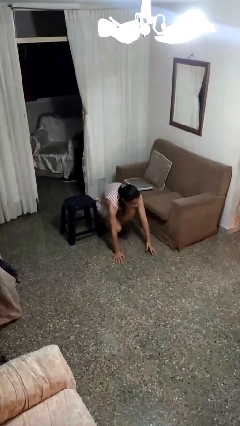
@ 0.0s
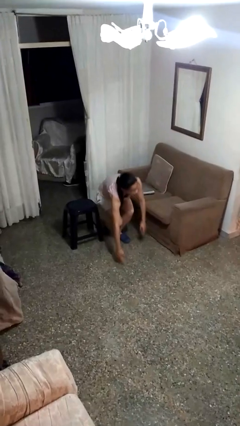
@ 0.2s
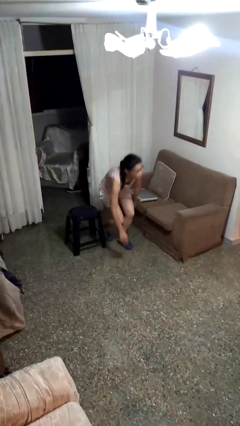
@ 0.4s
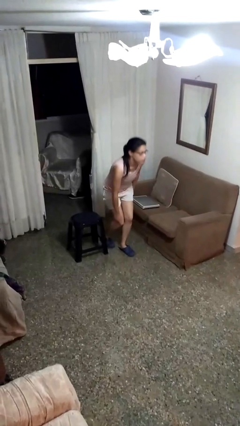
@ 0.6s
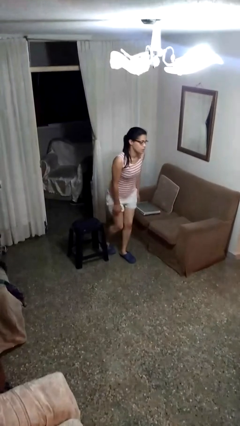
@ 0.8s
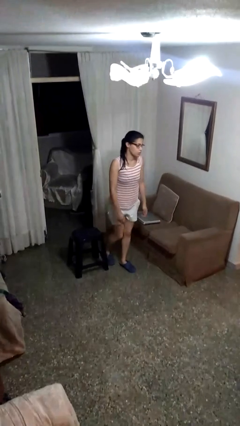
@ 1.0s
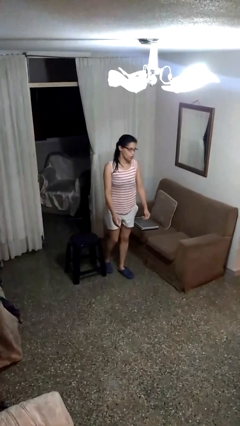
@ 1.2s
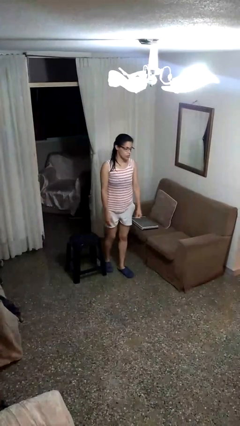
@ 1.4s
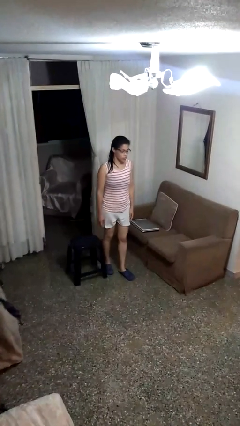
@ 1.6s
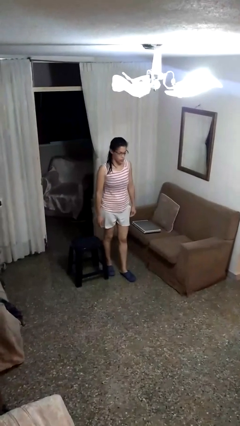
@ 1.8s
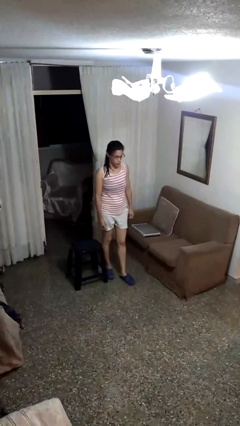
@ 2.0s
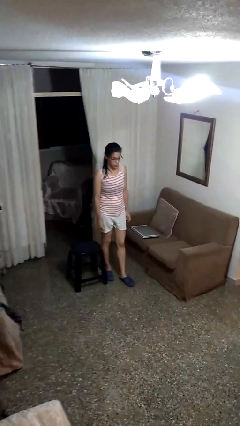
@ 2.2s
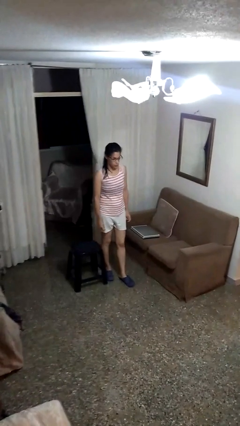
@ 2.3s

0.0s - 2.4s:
person stands up from floor

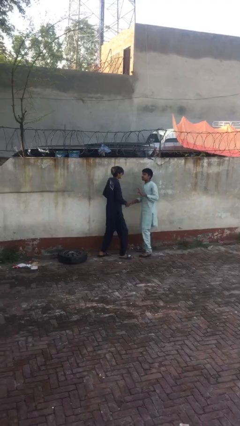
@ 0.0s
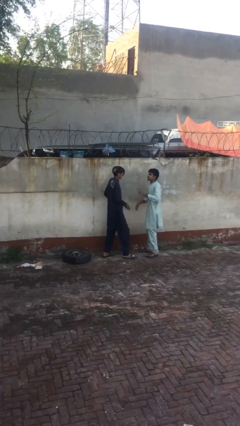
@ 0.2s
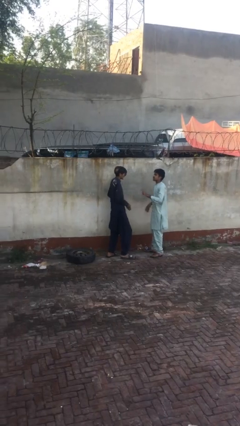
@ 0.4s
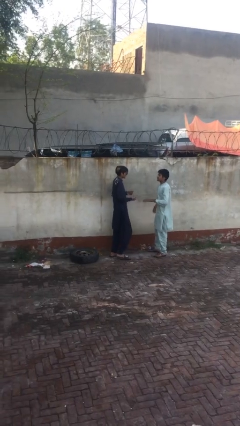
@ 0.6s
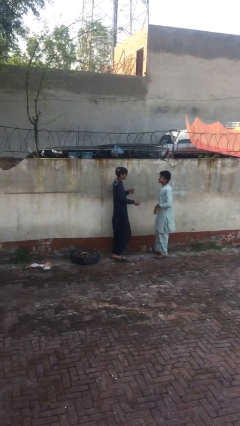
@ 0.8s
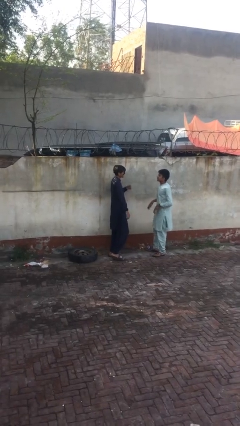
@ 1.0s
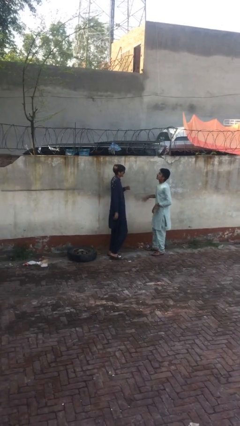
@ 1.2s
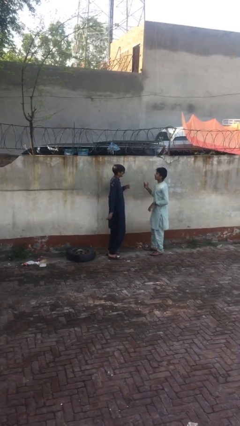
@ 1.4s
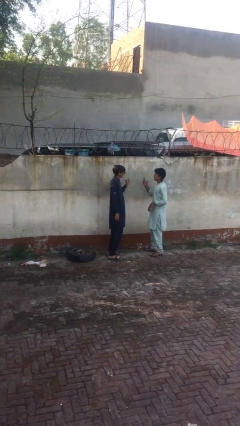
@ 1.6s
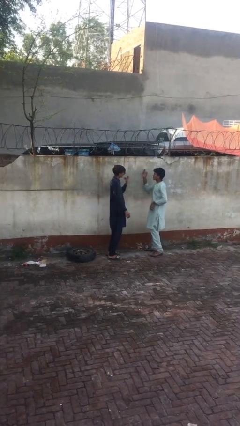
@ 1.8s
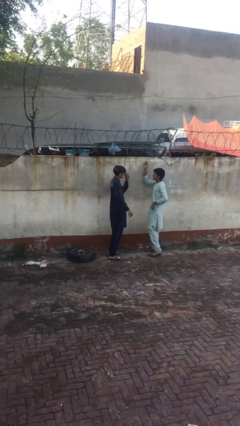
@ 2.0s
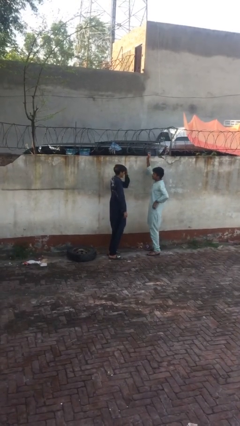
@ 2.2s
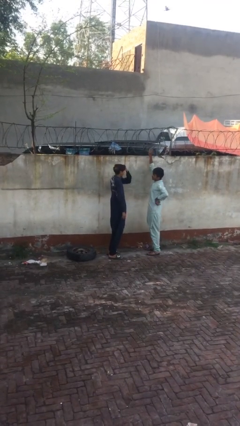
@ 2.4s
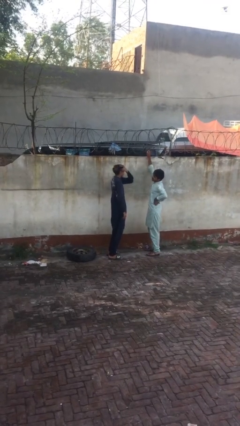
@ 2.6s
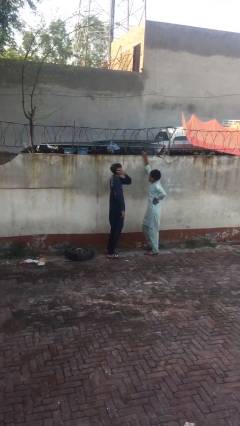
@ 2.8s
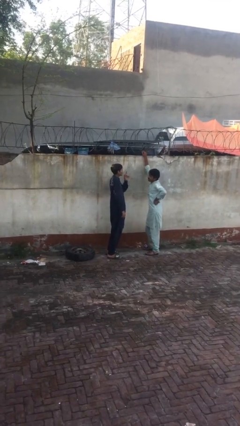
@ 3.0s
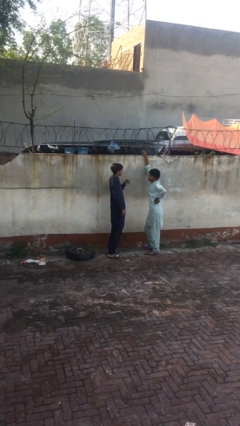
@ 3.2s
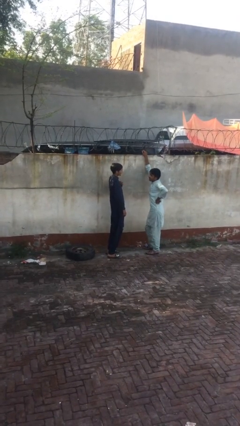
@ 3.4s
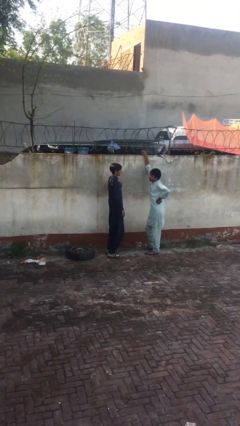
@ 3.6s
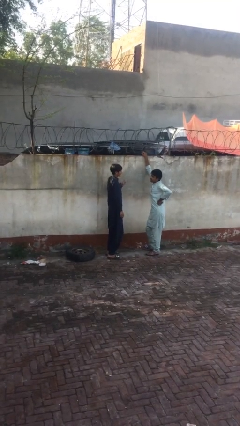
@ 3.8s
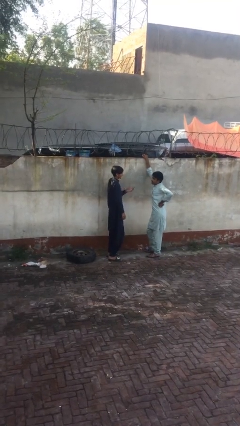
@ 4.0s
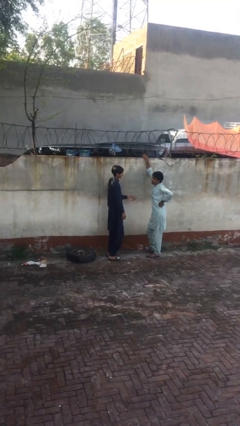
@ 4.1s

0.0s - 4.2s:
person talks to person

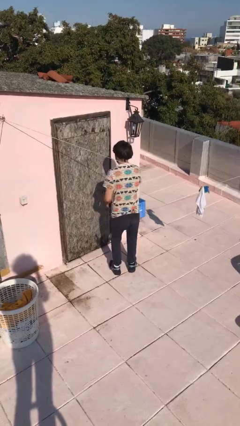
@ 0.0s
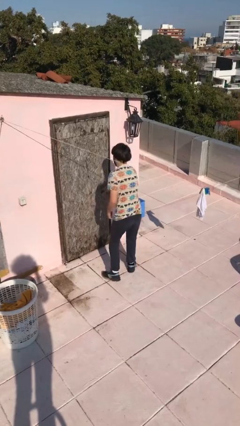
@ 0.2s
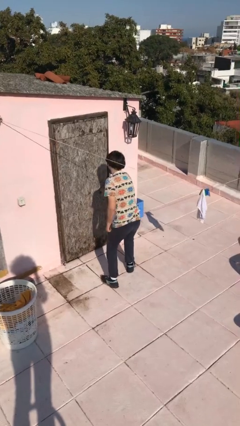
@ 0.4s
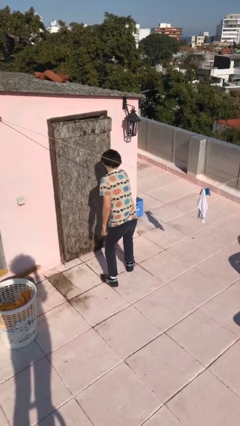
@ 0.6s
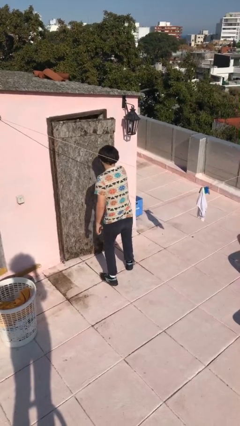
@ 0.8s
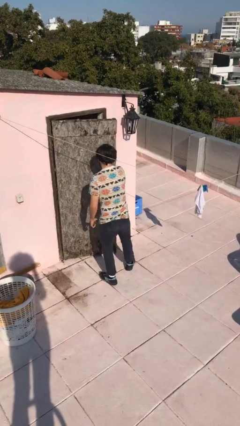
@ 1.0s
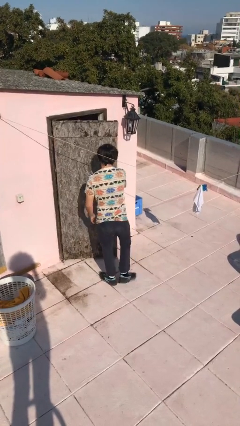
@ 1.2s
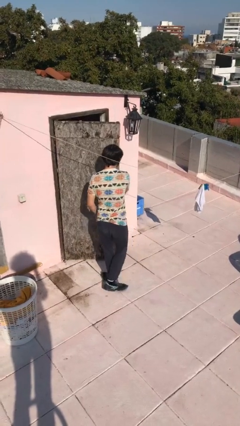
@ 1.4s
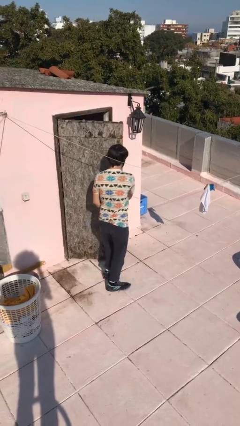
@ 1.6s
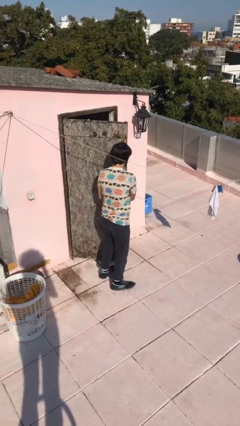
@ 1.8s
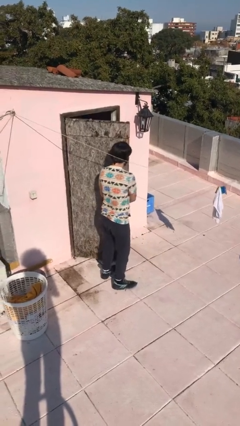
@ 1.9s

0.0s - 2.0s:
person opens facility door

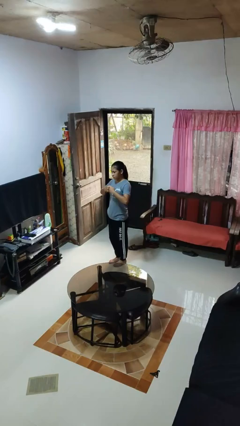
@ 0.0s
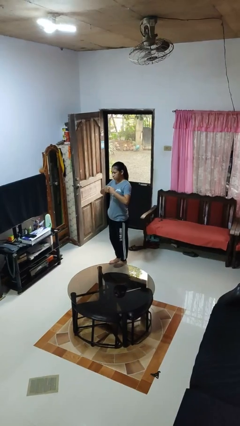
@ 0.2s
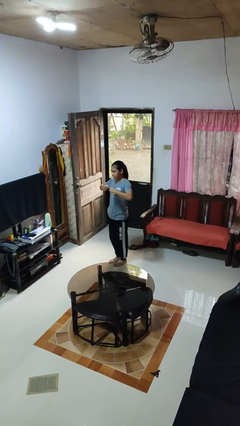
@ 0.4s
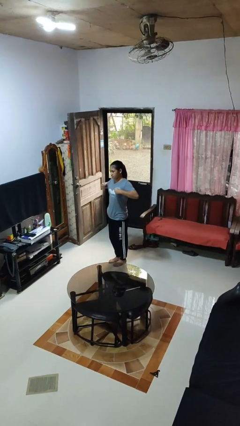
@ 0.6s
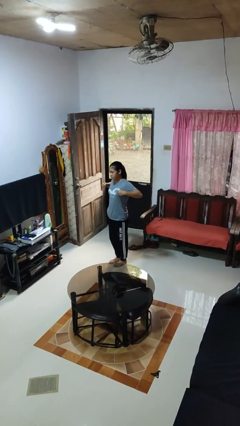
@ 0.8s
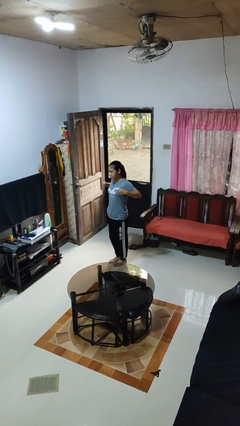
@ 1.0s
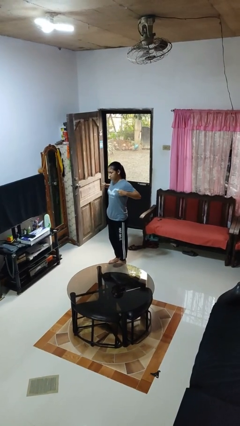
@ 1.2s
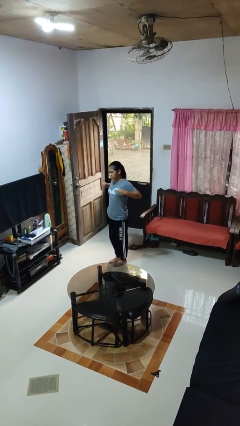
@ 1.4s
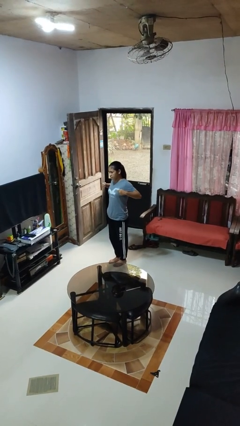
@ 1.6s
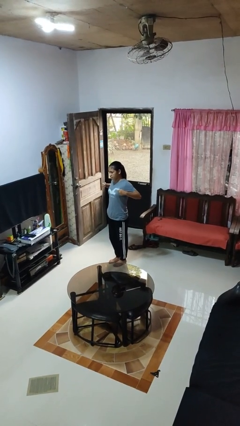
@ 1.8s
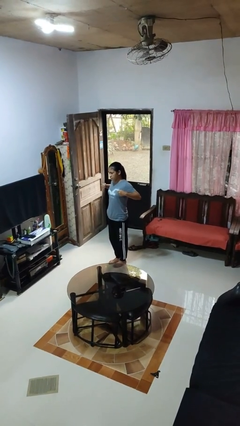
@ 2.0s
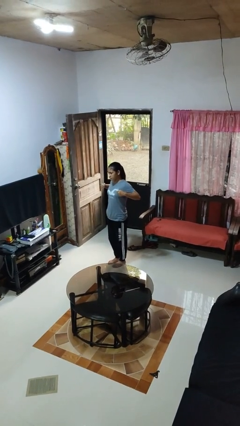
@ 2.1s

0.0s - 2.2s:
person gestures zoom in

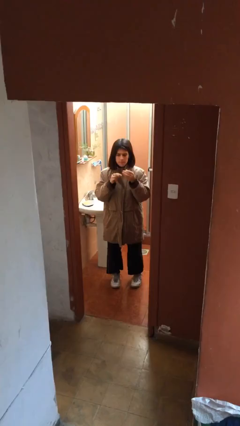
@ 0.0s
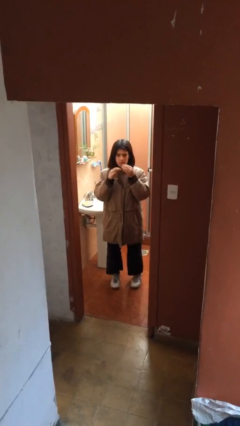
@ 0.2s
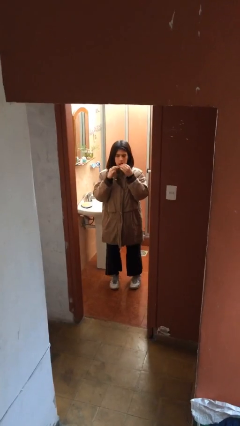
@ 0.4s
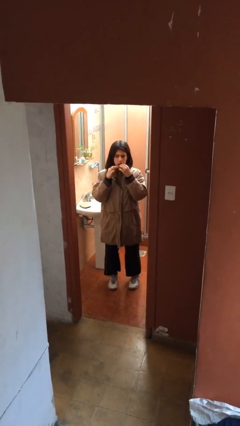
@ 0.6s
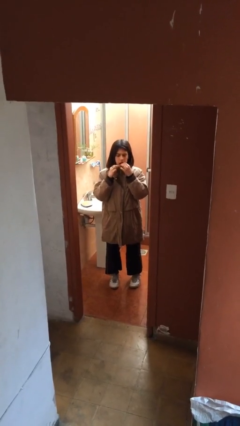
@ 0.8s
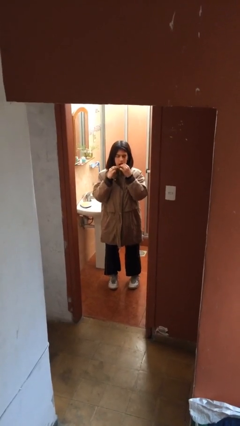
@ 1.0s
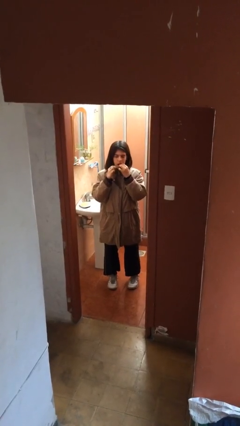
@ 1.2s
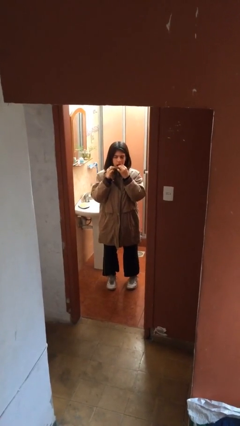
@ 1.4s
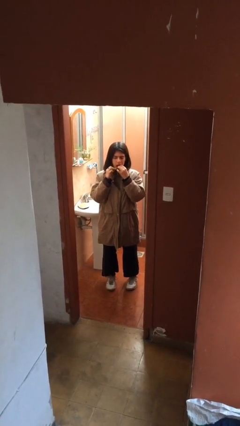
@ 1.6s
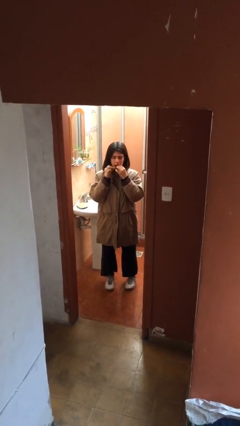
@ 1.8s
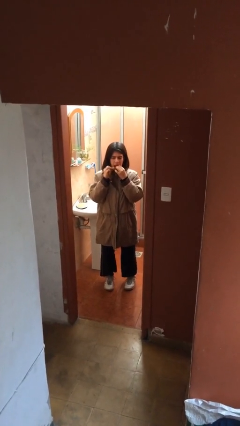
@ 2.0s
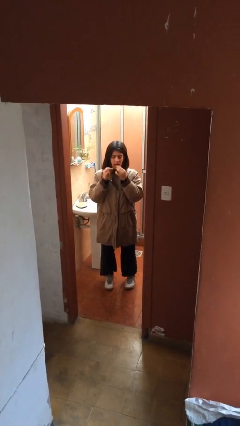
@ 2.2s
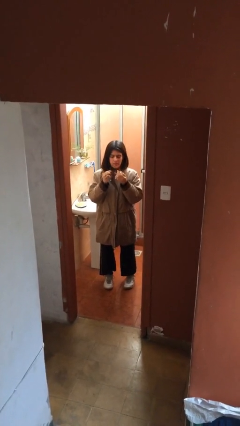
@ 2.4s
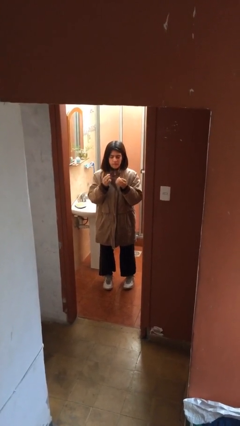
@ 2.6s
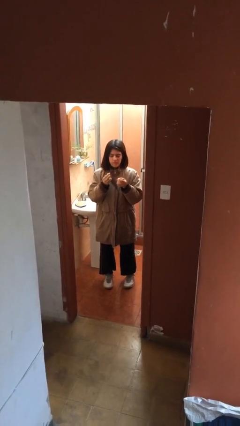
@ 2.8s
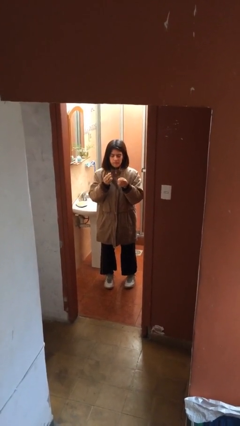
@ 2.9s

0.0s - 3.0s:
person flosses

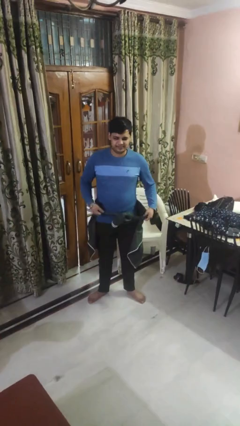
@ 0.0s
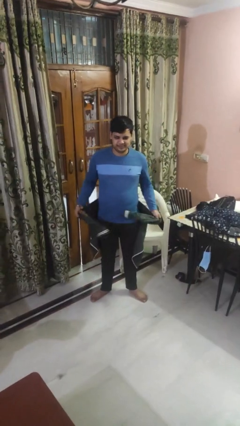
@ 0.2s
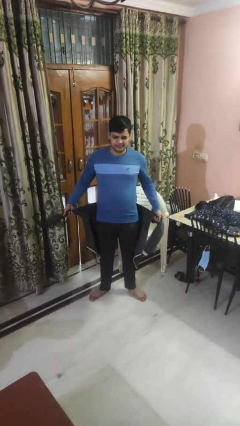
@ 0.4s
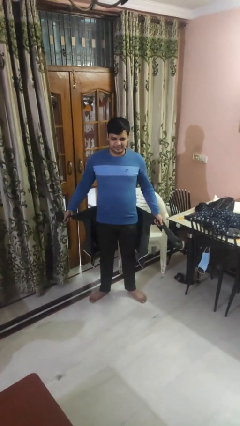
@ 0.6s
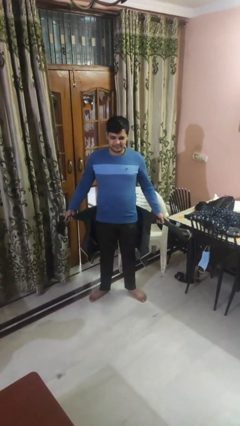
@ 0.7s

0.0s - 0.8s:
person unties jacket around waist

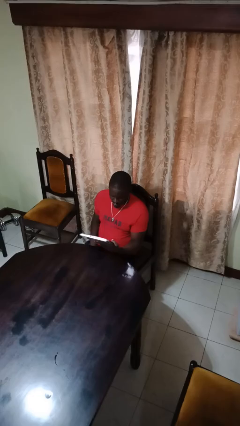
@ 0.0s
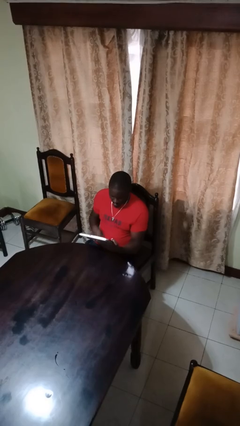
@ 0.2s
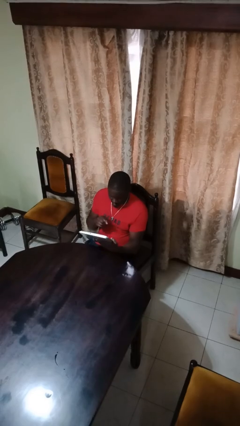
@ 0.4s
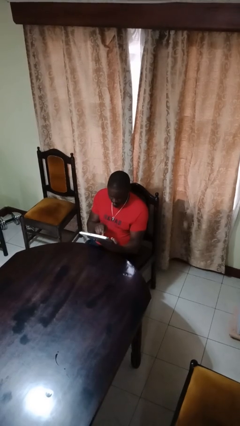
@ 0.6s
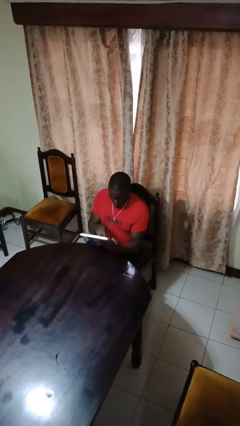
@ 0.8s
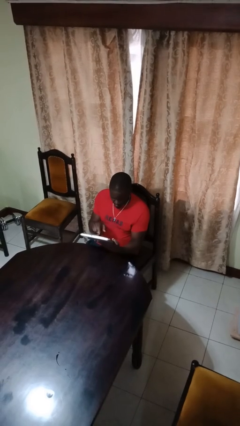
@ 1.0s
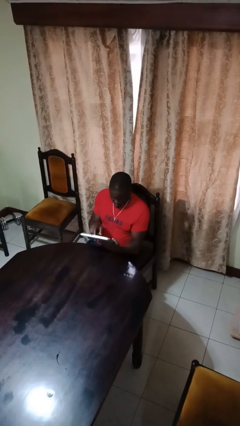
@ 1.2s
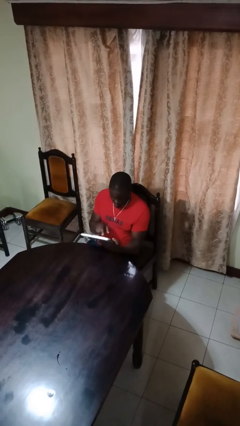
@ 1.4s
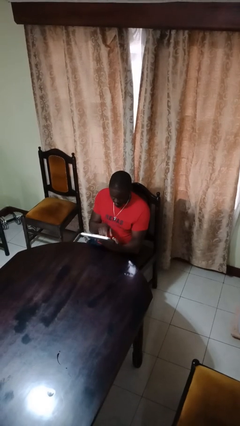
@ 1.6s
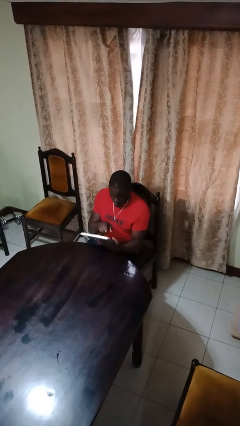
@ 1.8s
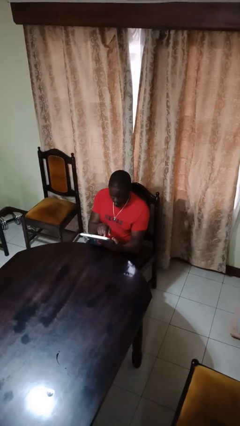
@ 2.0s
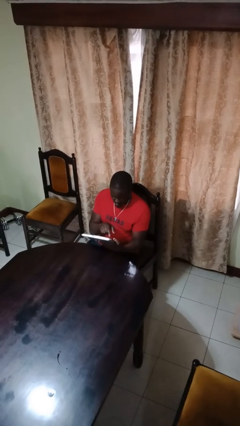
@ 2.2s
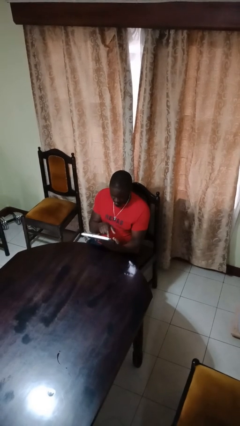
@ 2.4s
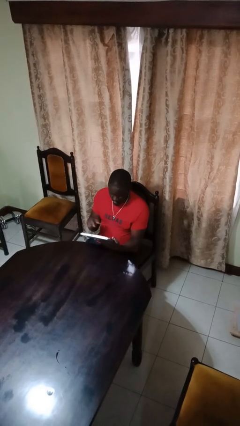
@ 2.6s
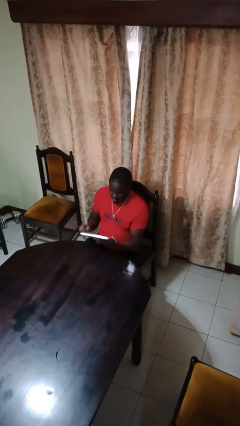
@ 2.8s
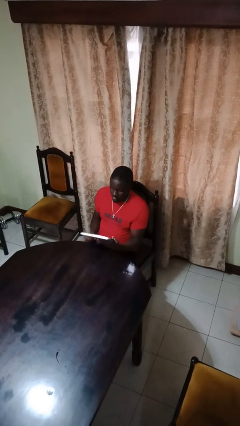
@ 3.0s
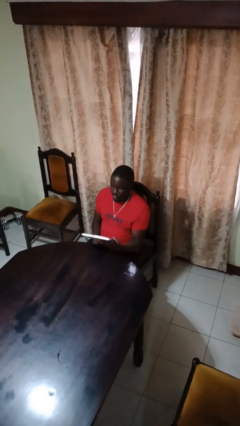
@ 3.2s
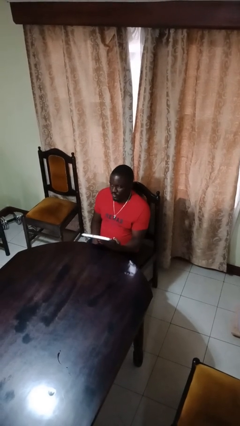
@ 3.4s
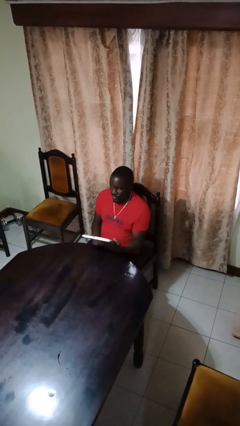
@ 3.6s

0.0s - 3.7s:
person interacts with tablet
